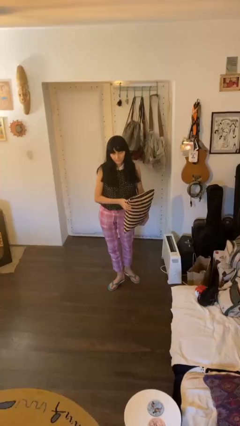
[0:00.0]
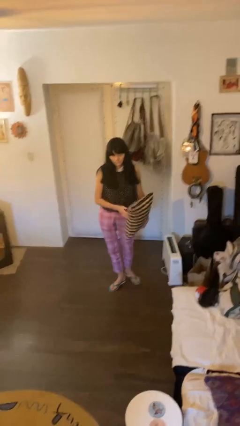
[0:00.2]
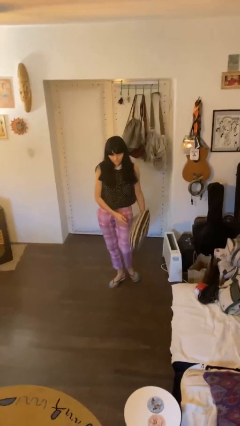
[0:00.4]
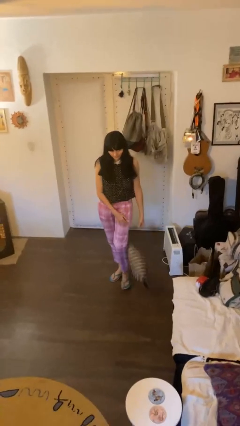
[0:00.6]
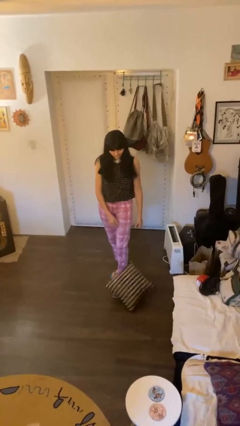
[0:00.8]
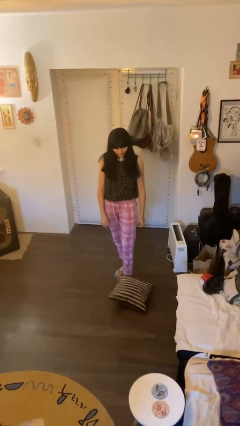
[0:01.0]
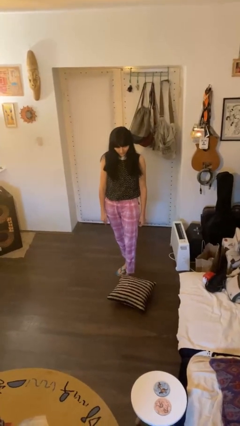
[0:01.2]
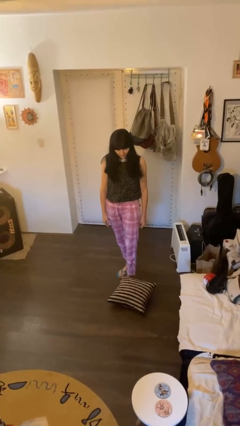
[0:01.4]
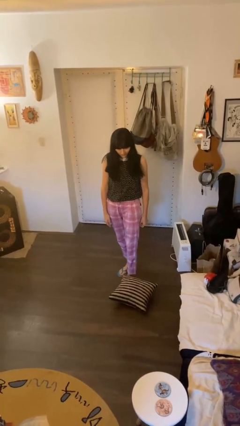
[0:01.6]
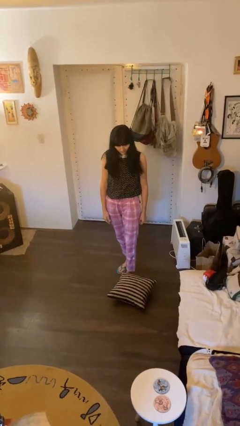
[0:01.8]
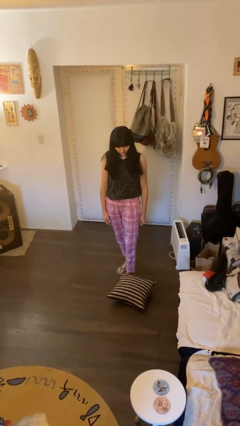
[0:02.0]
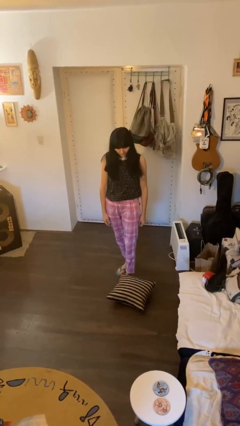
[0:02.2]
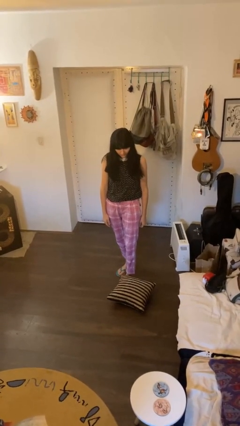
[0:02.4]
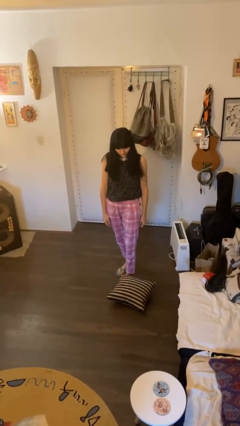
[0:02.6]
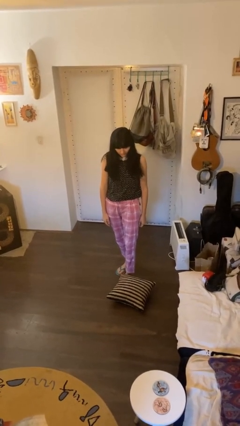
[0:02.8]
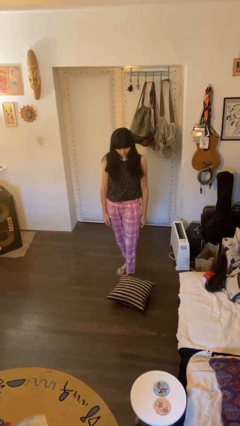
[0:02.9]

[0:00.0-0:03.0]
person drops object

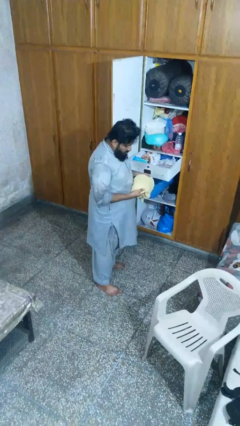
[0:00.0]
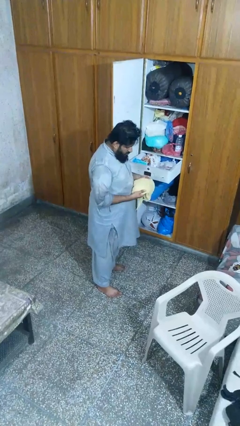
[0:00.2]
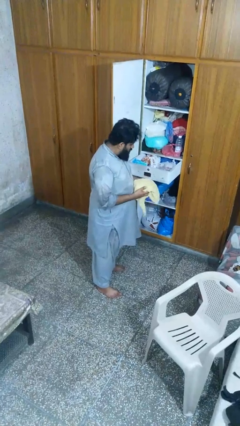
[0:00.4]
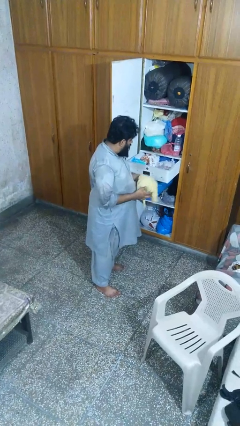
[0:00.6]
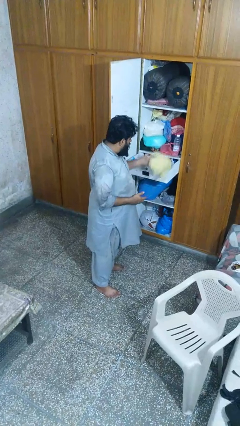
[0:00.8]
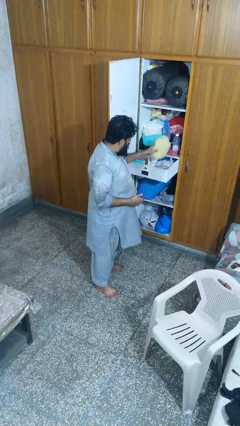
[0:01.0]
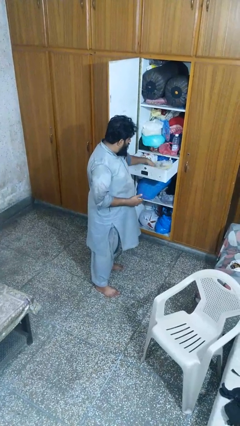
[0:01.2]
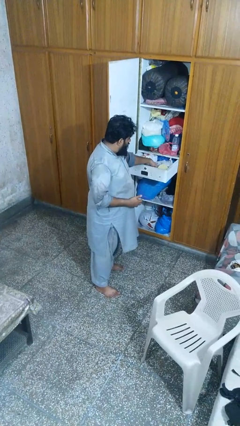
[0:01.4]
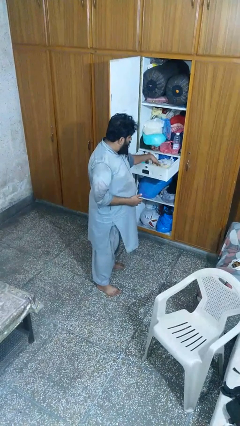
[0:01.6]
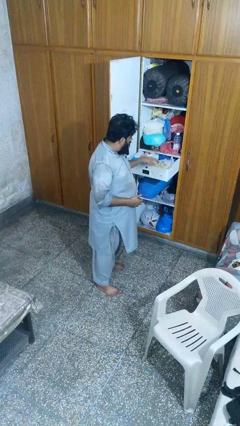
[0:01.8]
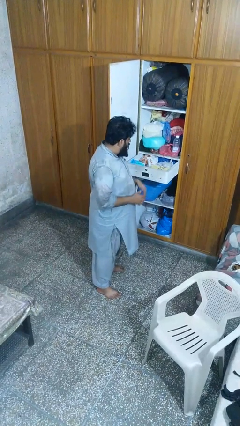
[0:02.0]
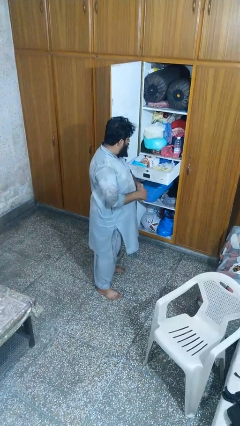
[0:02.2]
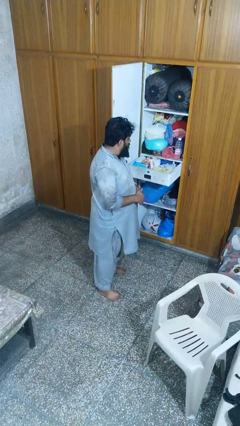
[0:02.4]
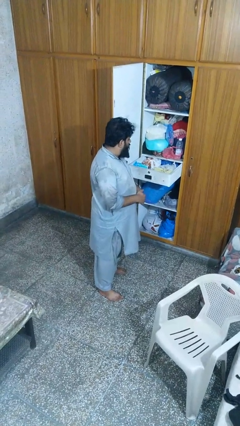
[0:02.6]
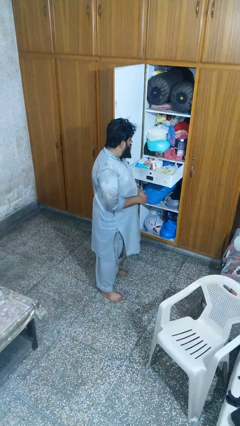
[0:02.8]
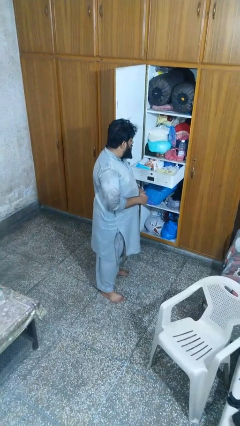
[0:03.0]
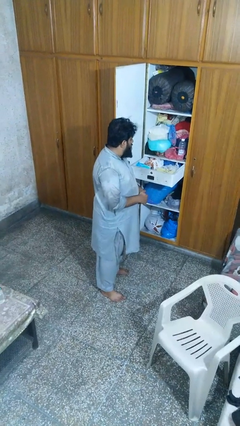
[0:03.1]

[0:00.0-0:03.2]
person puts clothes into dresser

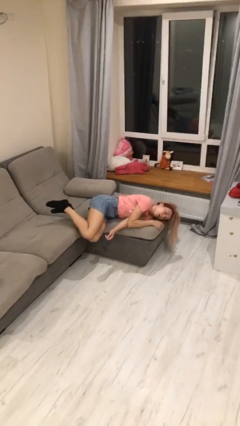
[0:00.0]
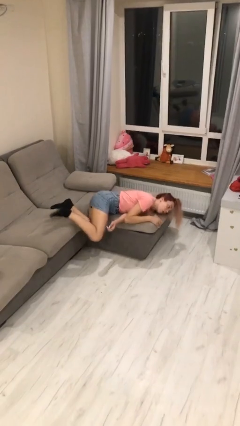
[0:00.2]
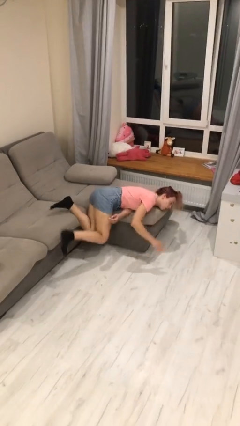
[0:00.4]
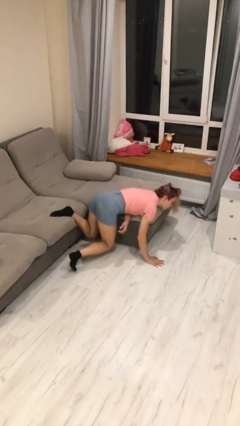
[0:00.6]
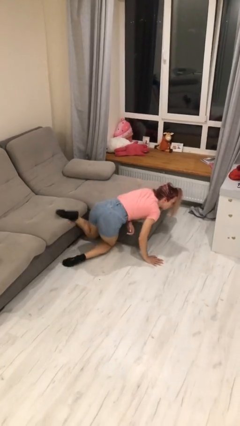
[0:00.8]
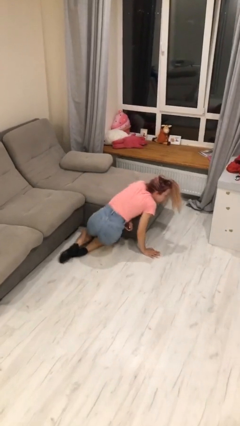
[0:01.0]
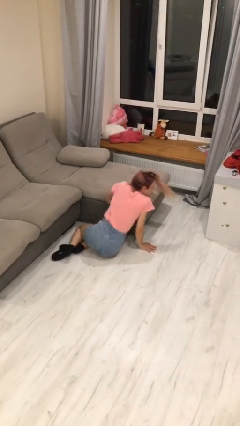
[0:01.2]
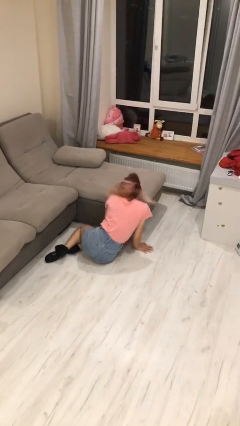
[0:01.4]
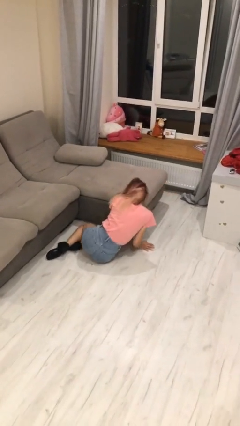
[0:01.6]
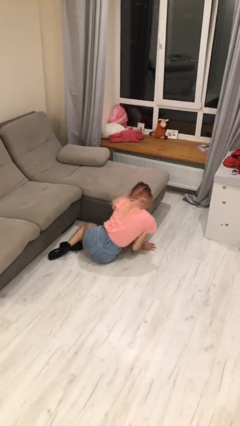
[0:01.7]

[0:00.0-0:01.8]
person falls from bed

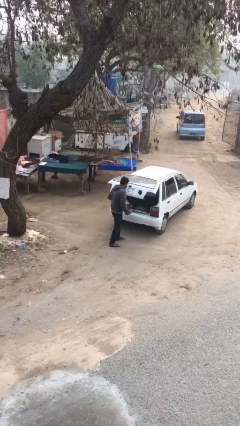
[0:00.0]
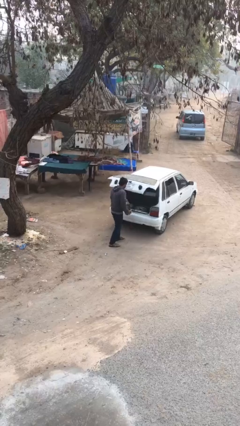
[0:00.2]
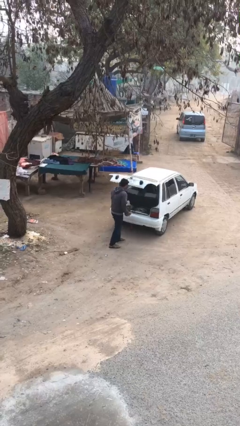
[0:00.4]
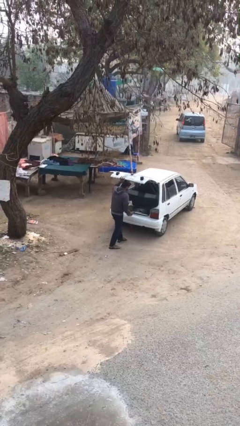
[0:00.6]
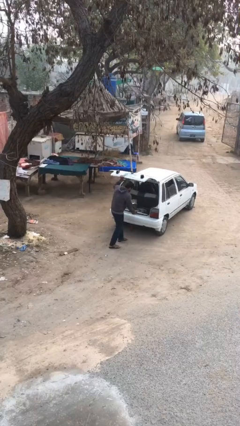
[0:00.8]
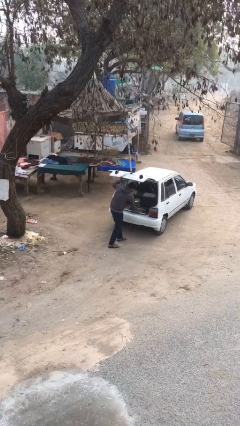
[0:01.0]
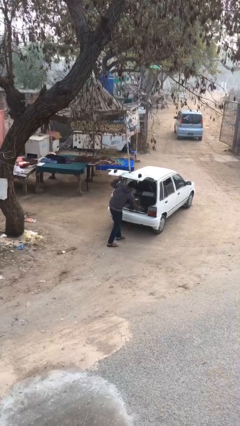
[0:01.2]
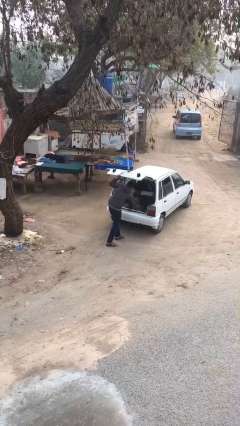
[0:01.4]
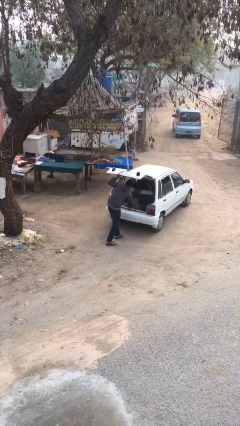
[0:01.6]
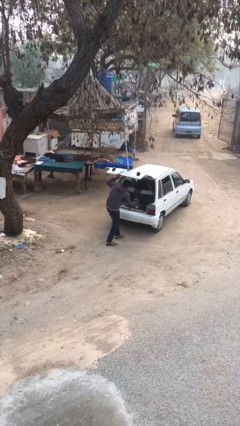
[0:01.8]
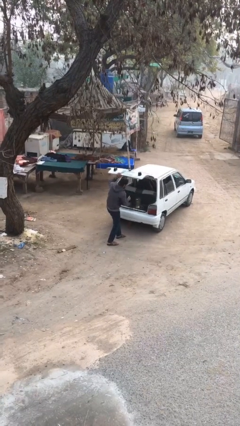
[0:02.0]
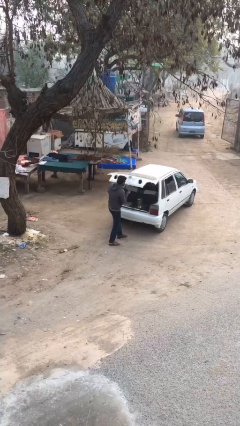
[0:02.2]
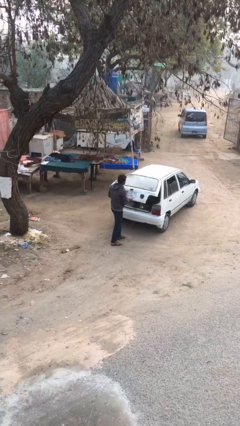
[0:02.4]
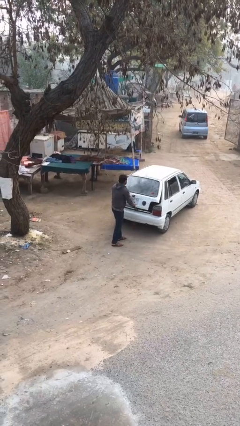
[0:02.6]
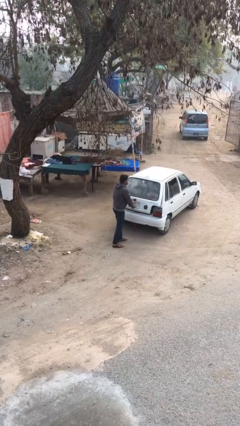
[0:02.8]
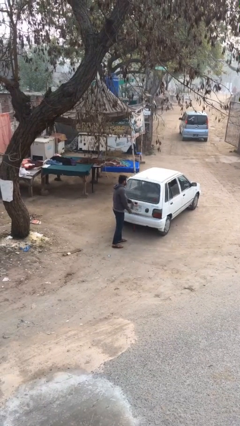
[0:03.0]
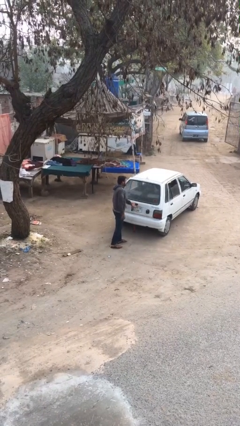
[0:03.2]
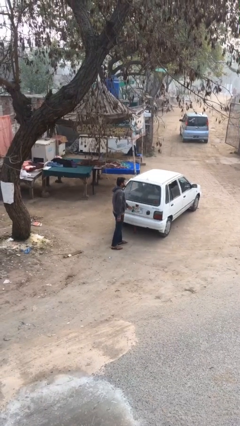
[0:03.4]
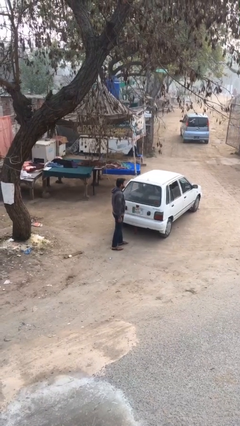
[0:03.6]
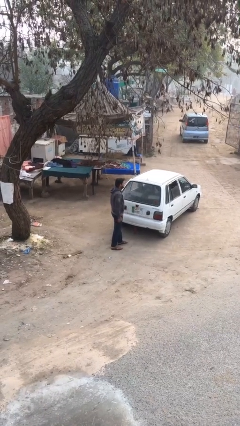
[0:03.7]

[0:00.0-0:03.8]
person loads car

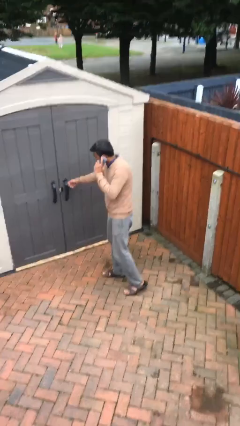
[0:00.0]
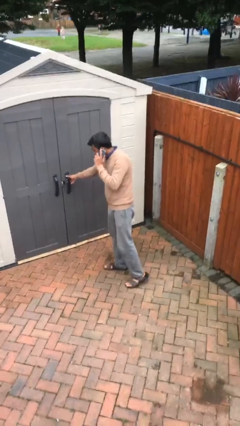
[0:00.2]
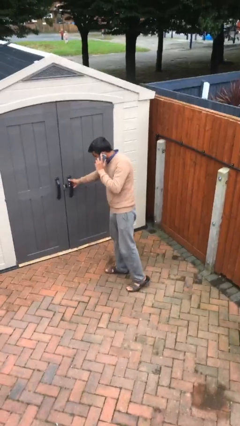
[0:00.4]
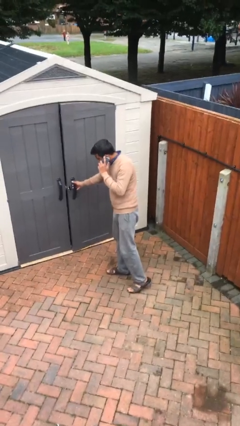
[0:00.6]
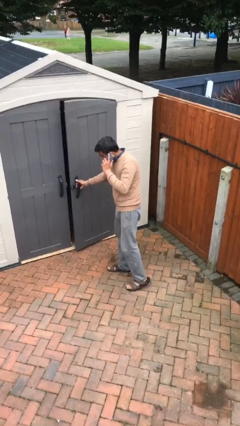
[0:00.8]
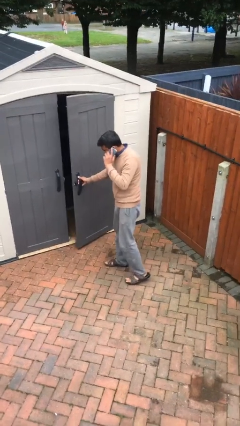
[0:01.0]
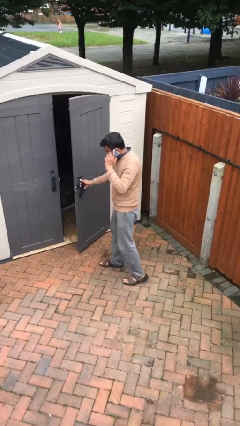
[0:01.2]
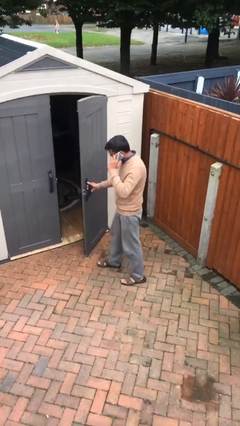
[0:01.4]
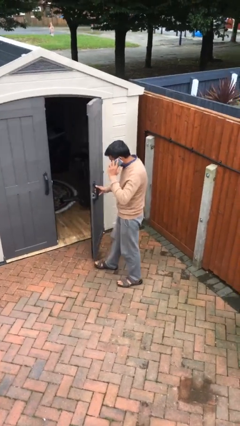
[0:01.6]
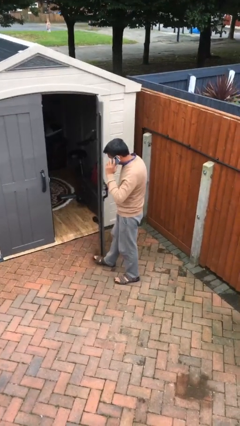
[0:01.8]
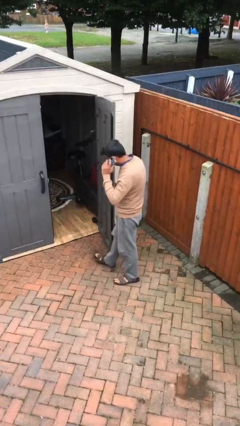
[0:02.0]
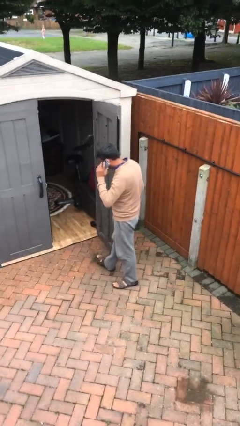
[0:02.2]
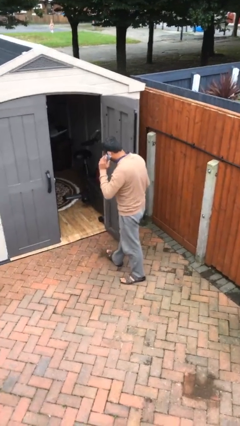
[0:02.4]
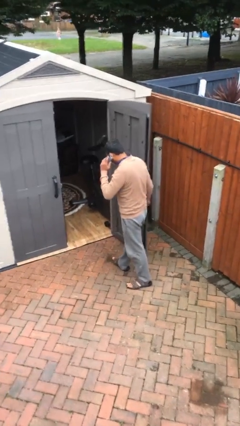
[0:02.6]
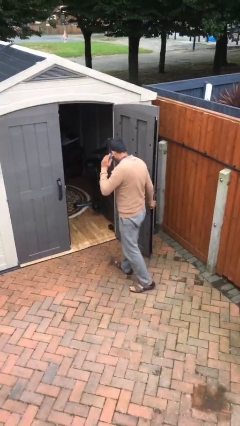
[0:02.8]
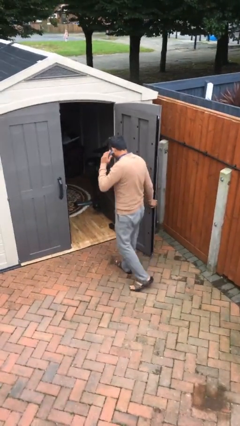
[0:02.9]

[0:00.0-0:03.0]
person opens facility door

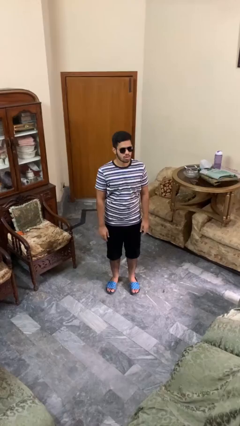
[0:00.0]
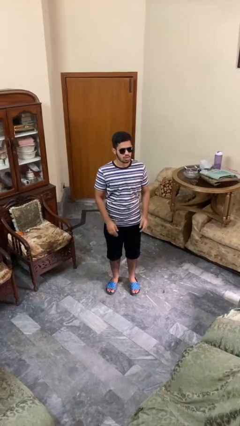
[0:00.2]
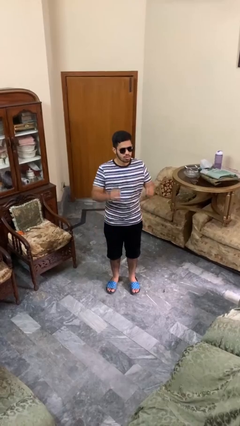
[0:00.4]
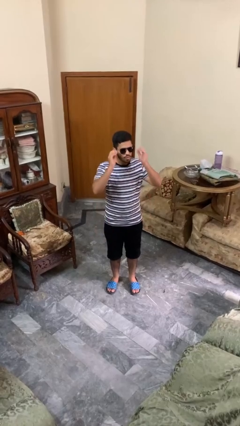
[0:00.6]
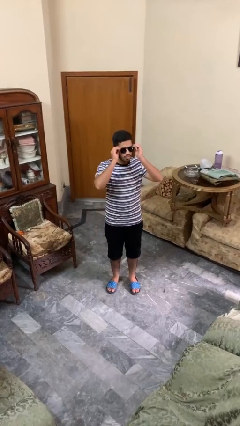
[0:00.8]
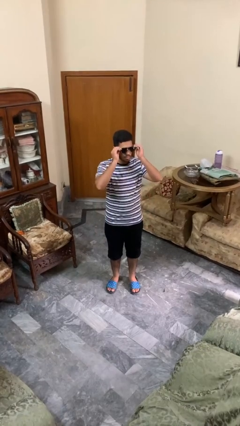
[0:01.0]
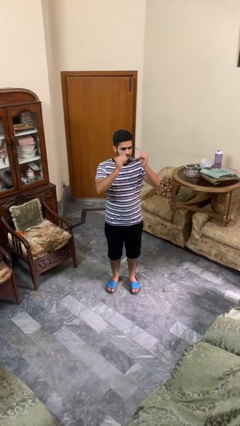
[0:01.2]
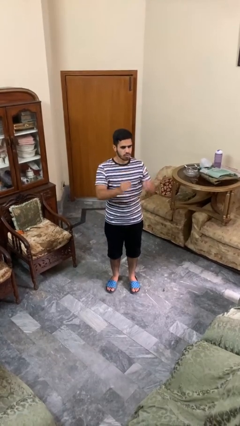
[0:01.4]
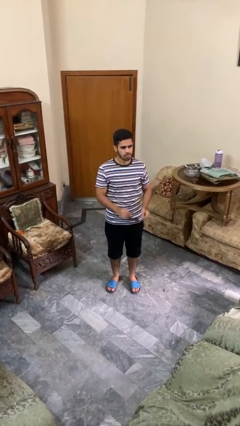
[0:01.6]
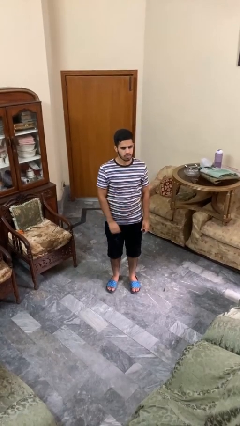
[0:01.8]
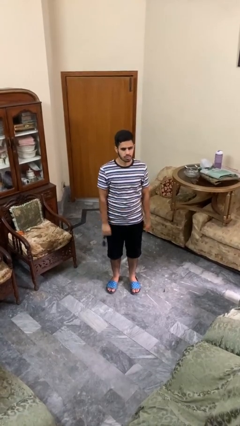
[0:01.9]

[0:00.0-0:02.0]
person takes off sunglasses

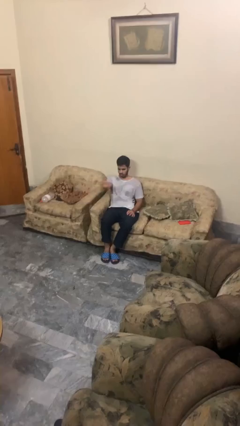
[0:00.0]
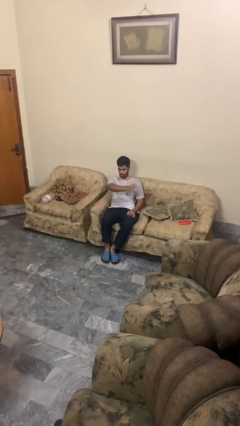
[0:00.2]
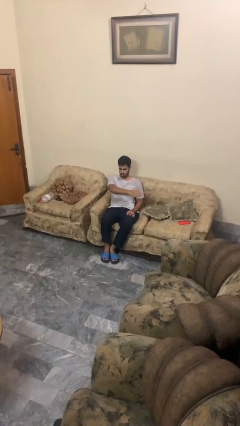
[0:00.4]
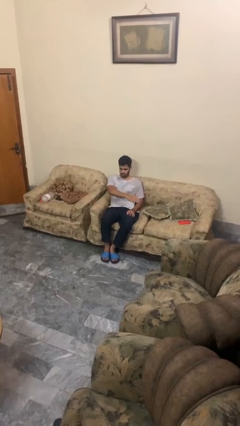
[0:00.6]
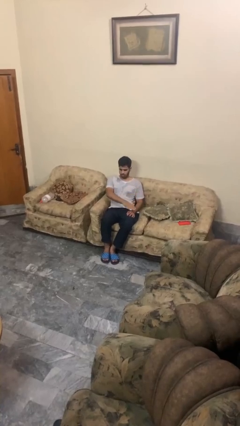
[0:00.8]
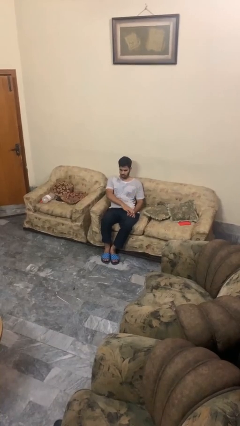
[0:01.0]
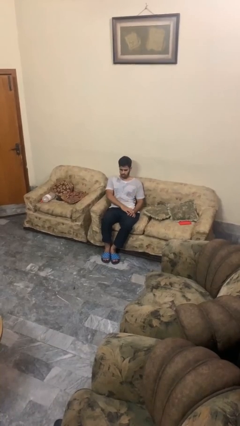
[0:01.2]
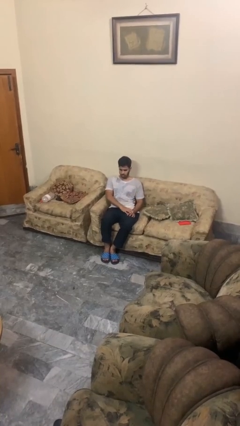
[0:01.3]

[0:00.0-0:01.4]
person gestures swipe left
